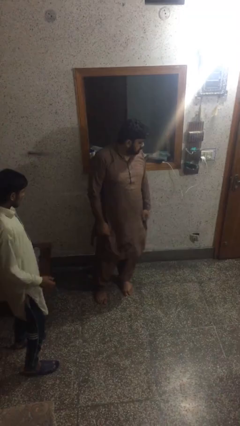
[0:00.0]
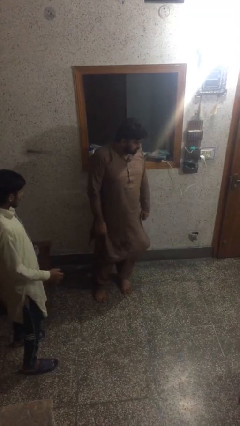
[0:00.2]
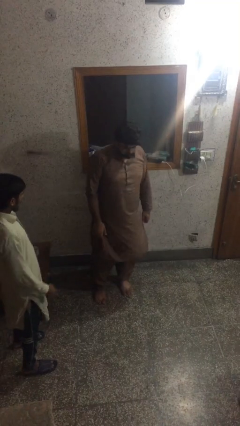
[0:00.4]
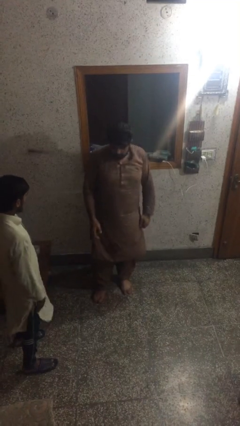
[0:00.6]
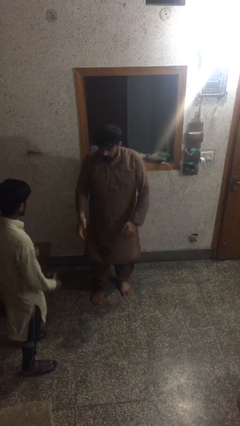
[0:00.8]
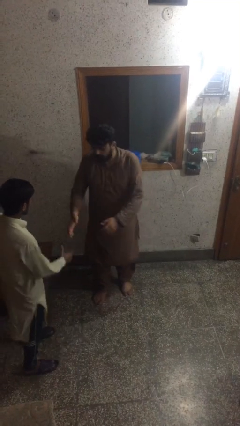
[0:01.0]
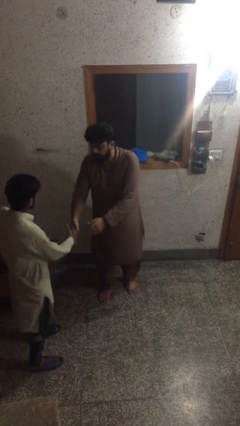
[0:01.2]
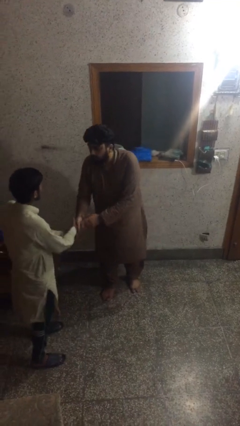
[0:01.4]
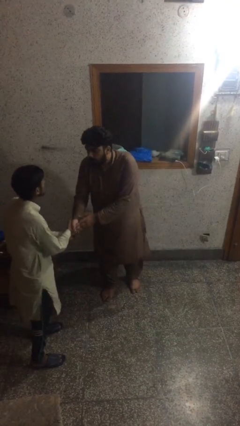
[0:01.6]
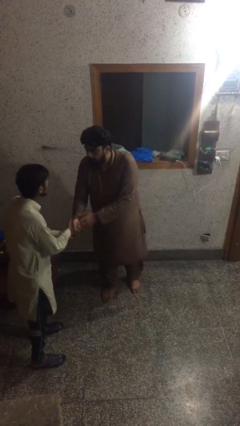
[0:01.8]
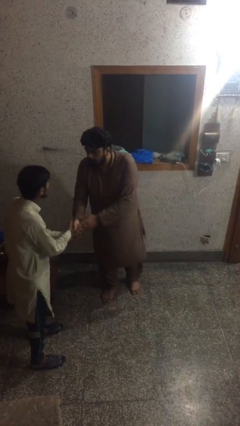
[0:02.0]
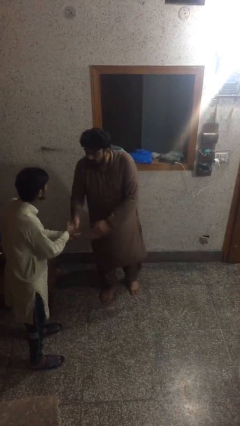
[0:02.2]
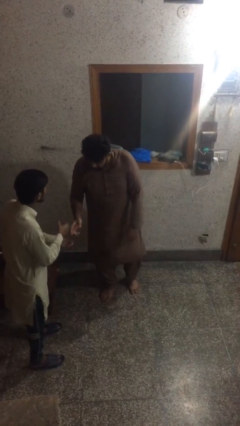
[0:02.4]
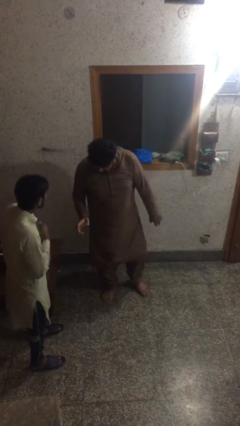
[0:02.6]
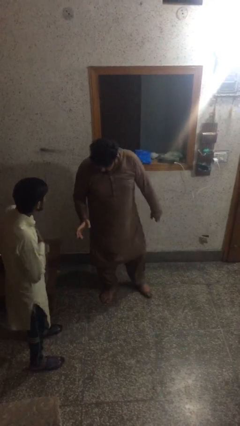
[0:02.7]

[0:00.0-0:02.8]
person shakes hand

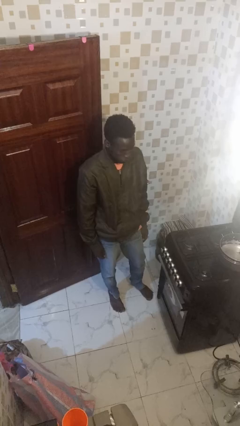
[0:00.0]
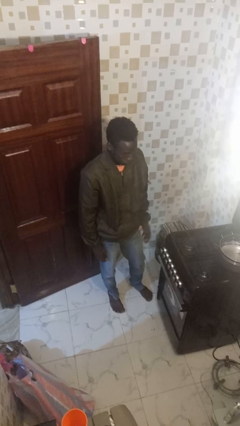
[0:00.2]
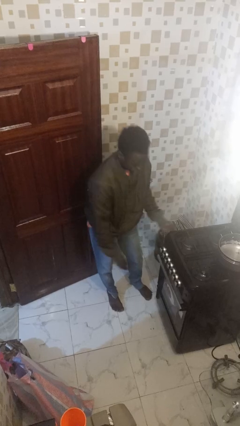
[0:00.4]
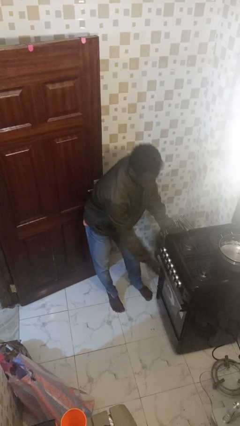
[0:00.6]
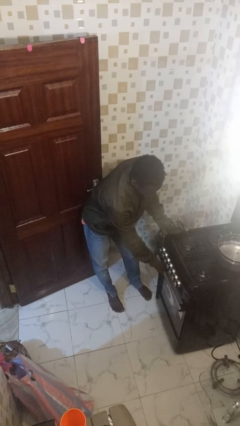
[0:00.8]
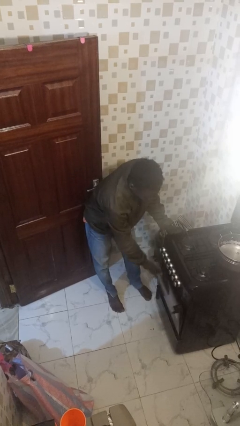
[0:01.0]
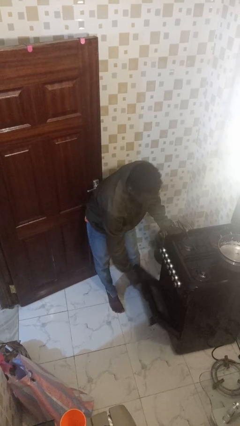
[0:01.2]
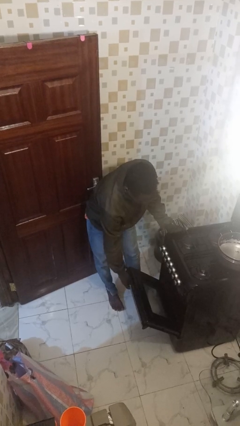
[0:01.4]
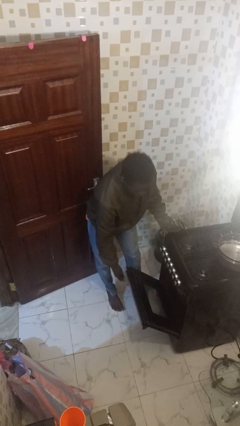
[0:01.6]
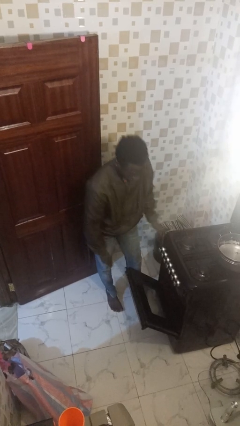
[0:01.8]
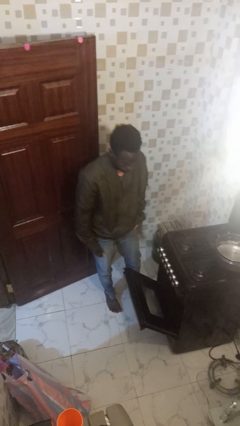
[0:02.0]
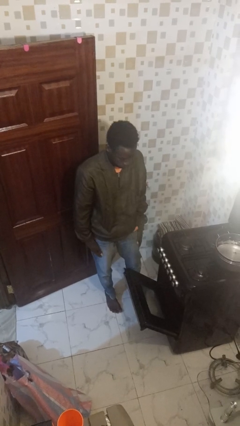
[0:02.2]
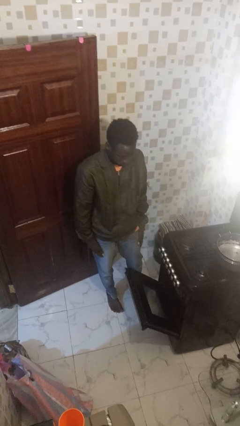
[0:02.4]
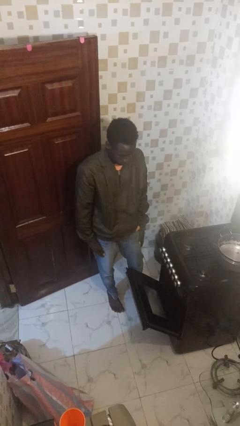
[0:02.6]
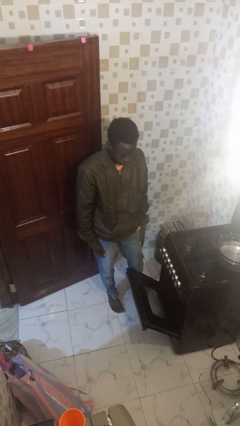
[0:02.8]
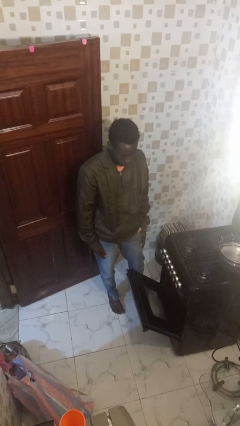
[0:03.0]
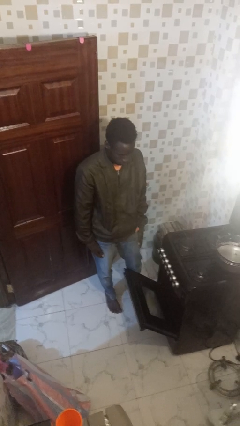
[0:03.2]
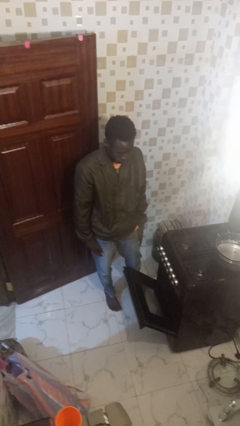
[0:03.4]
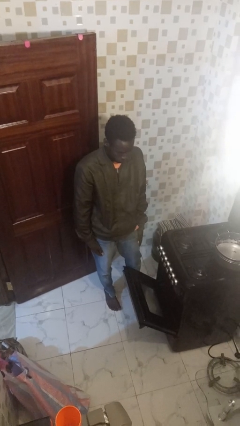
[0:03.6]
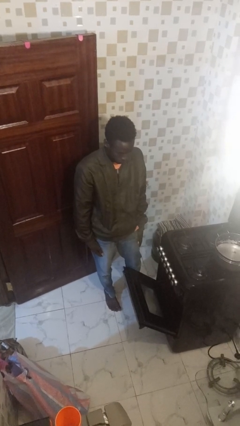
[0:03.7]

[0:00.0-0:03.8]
person opens oven door

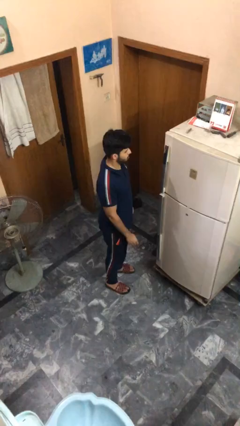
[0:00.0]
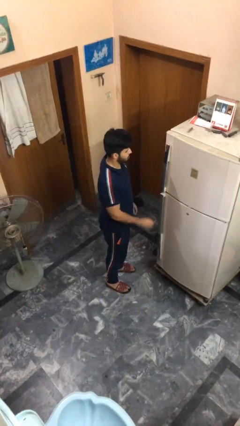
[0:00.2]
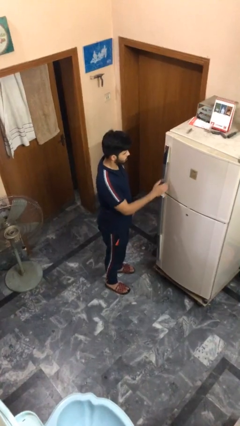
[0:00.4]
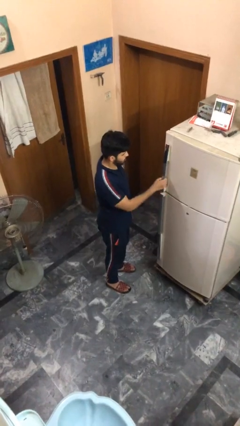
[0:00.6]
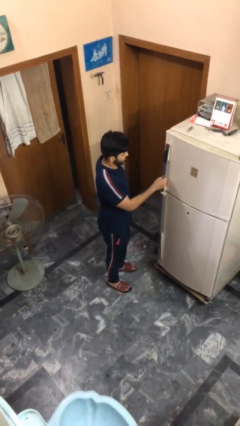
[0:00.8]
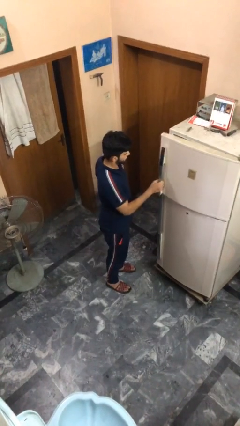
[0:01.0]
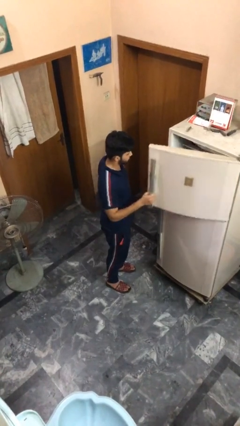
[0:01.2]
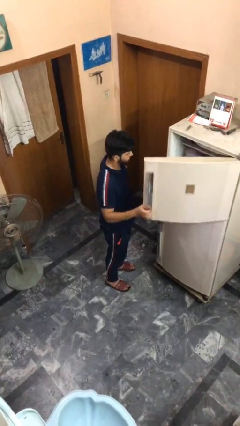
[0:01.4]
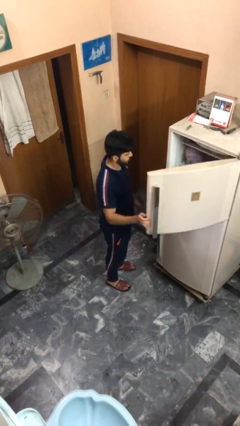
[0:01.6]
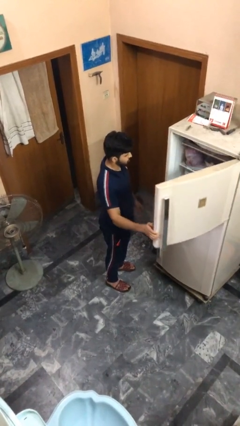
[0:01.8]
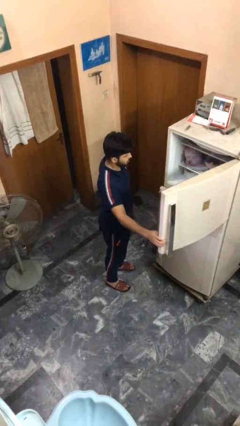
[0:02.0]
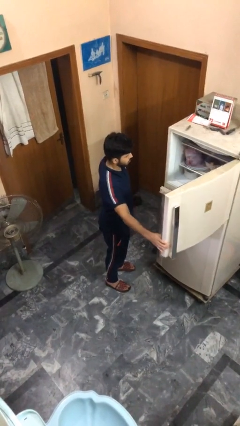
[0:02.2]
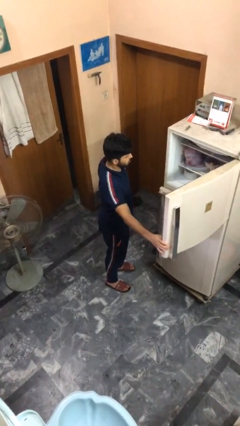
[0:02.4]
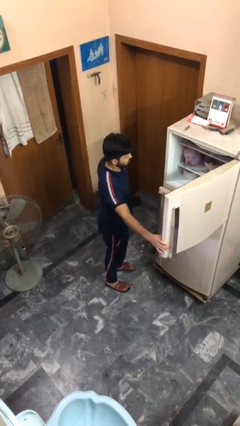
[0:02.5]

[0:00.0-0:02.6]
person opens refrigerator

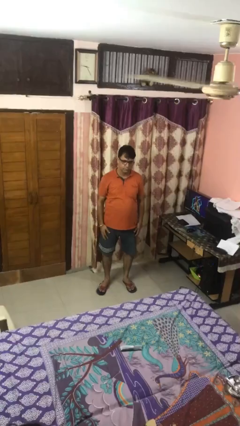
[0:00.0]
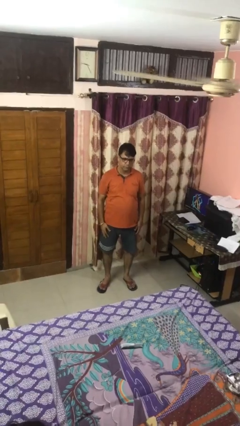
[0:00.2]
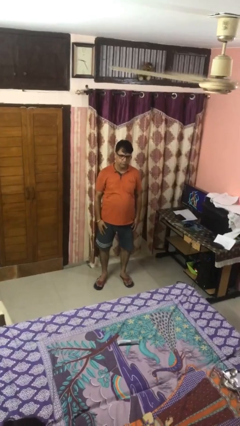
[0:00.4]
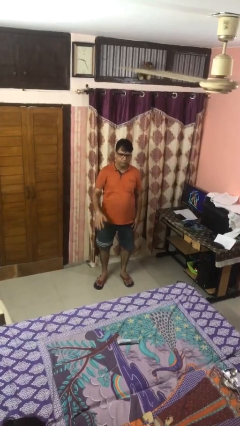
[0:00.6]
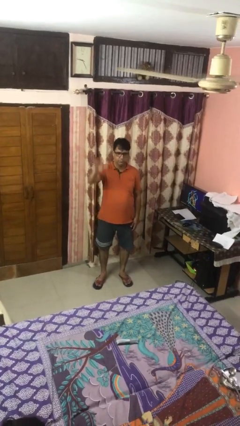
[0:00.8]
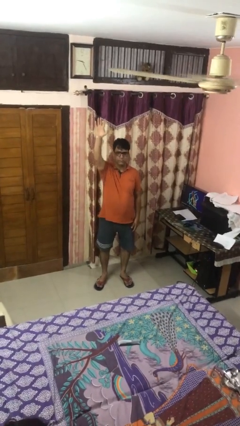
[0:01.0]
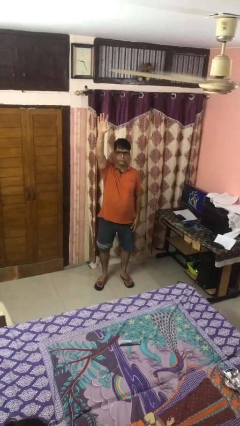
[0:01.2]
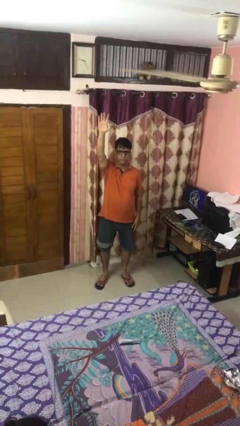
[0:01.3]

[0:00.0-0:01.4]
person gestures raise hand

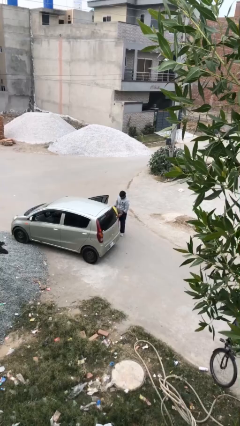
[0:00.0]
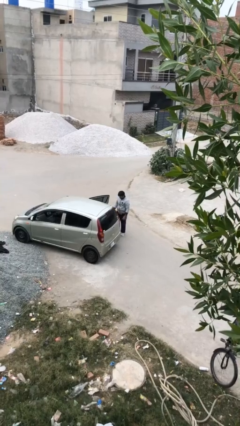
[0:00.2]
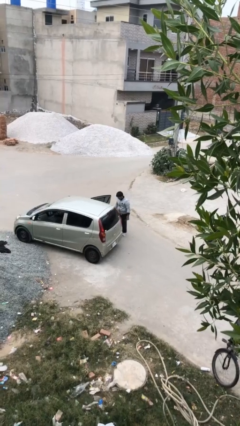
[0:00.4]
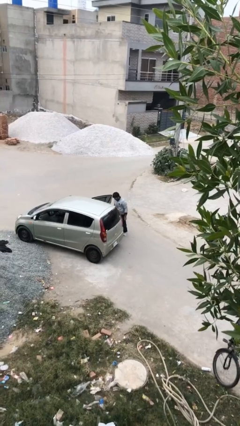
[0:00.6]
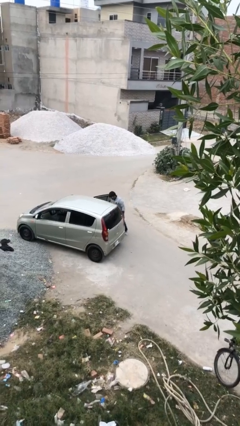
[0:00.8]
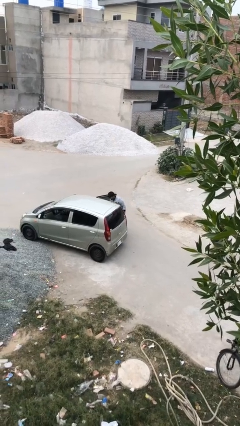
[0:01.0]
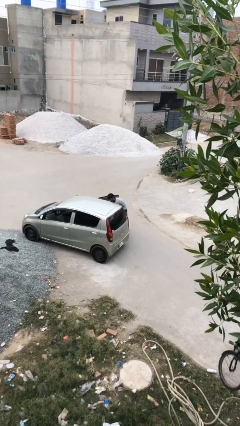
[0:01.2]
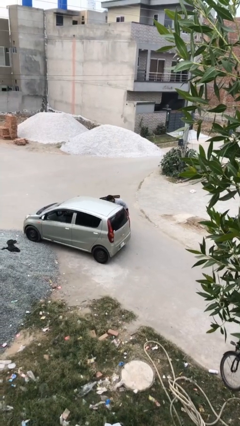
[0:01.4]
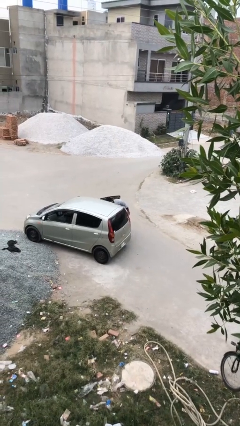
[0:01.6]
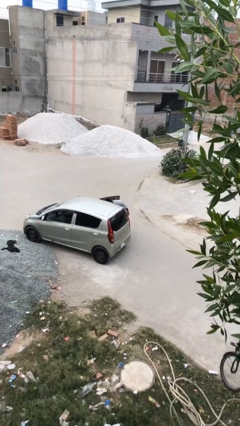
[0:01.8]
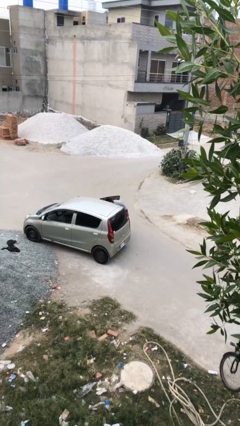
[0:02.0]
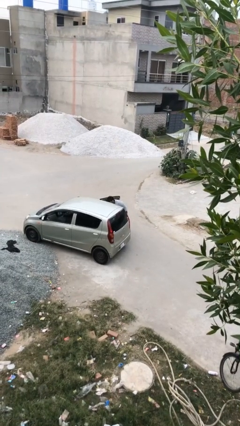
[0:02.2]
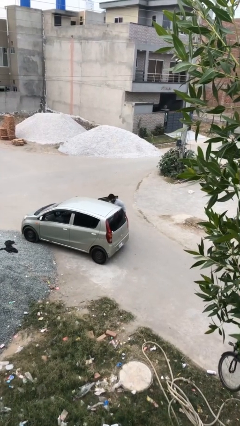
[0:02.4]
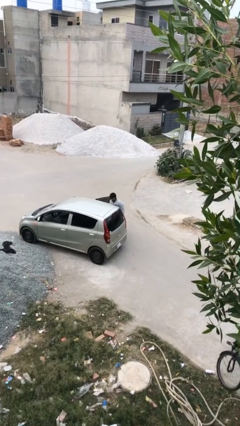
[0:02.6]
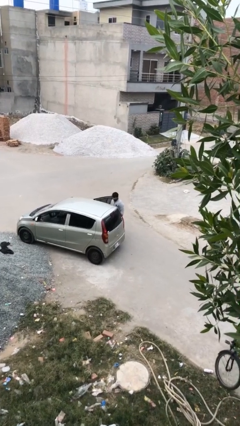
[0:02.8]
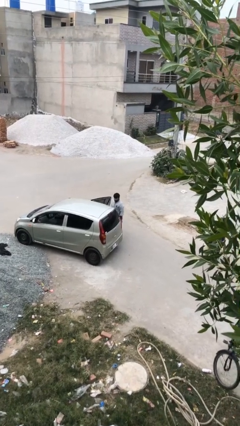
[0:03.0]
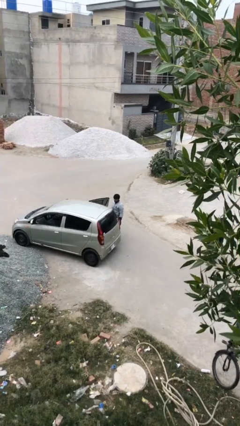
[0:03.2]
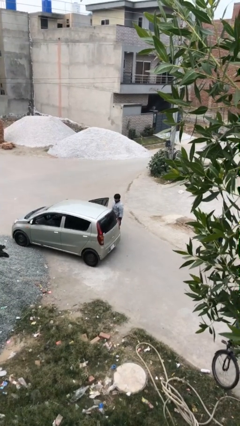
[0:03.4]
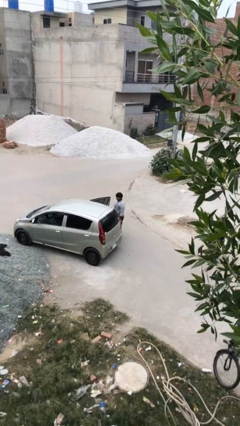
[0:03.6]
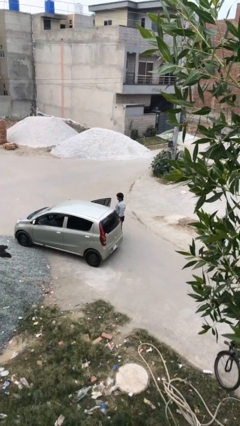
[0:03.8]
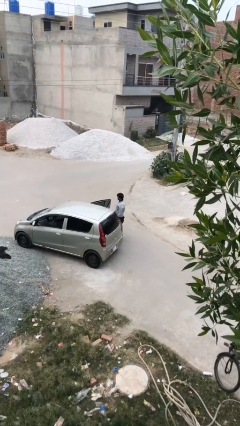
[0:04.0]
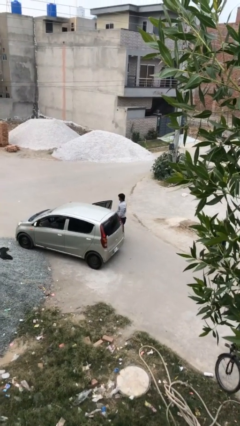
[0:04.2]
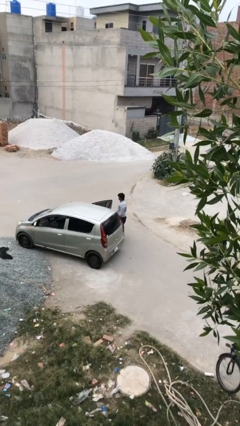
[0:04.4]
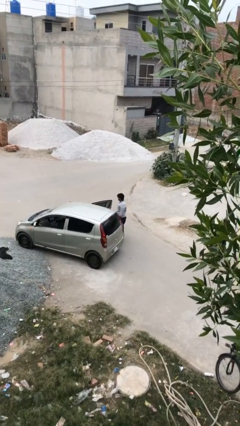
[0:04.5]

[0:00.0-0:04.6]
person loads car

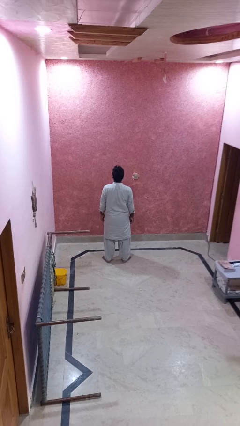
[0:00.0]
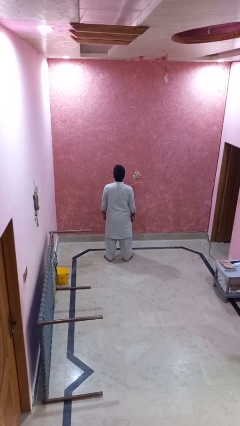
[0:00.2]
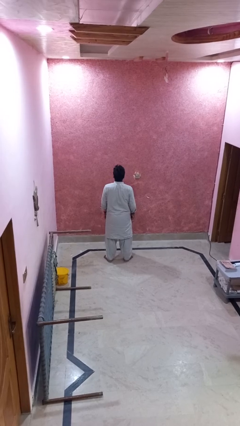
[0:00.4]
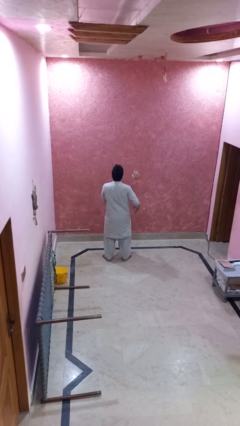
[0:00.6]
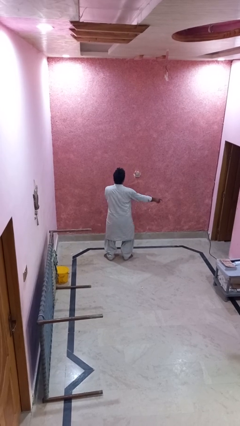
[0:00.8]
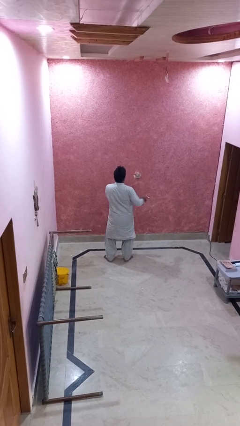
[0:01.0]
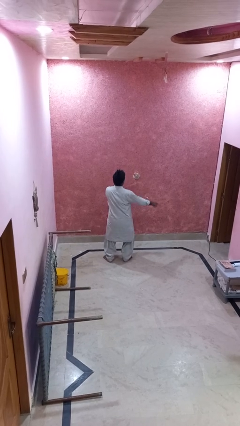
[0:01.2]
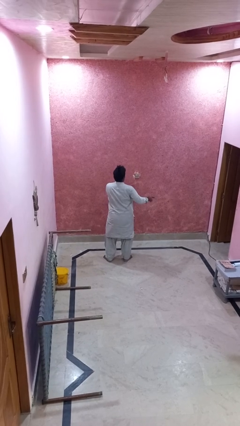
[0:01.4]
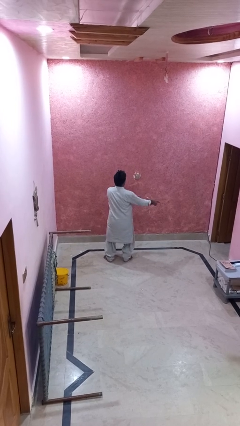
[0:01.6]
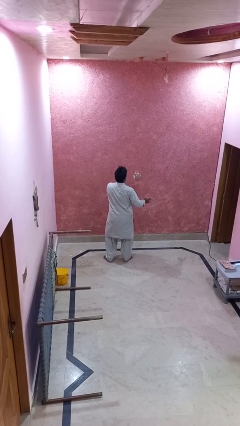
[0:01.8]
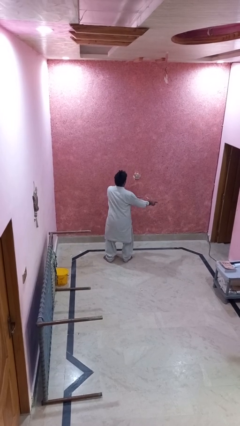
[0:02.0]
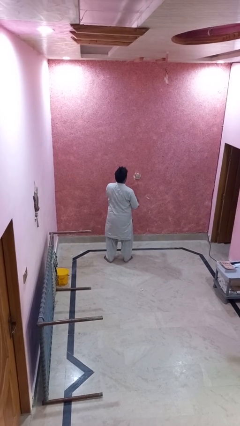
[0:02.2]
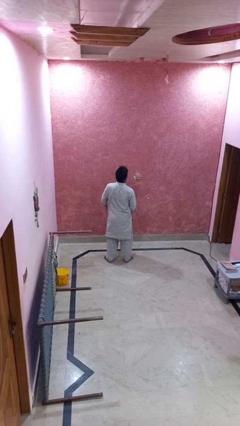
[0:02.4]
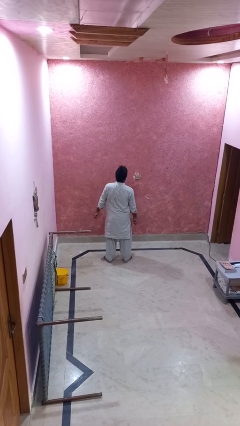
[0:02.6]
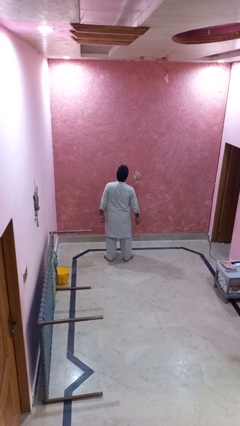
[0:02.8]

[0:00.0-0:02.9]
person dances in place
